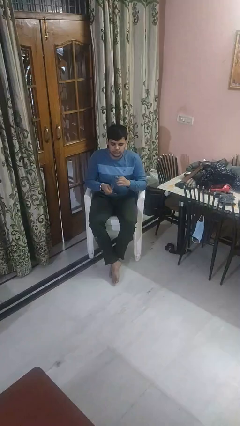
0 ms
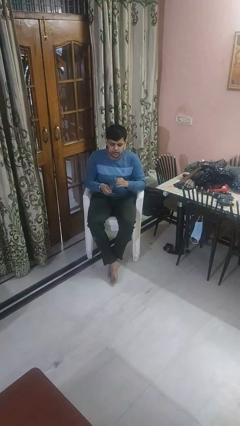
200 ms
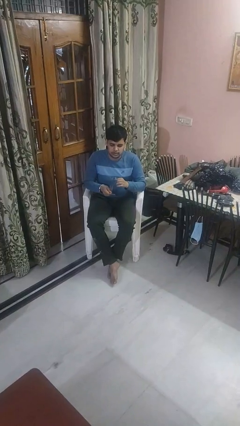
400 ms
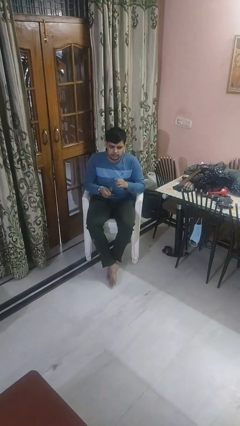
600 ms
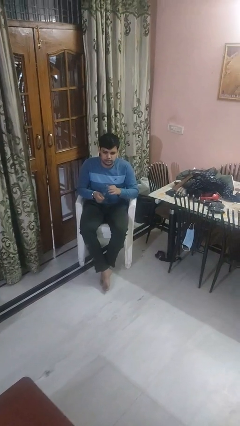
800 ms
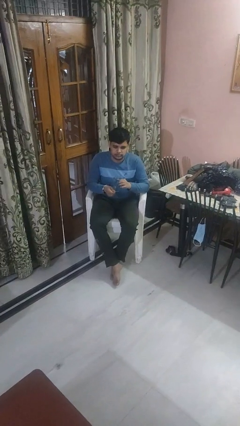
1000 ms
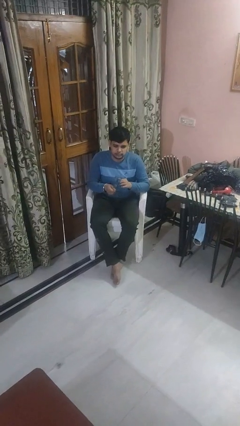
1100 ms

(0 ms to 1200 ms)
person cleans eyeglasses

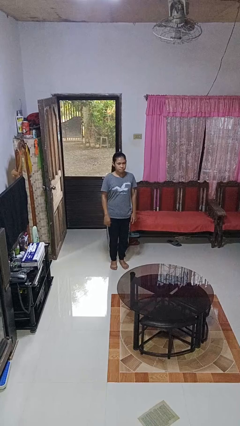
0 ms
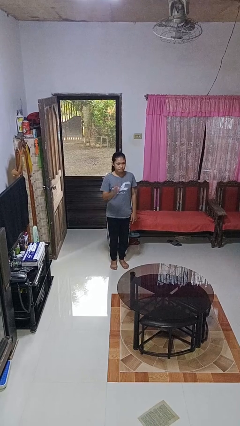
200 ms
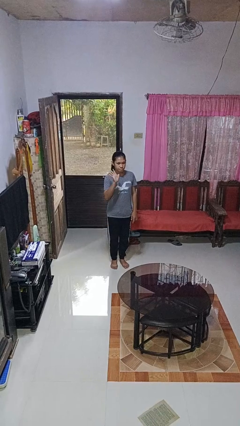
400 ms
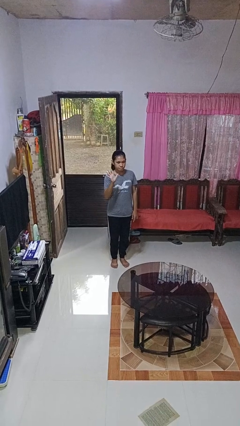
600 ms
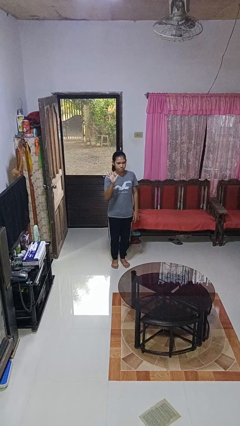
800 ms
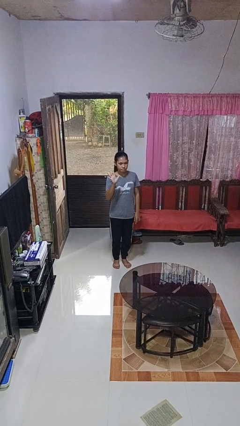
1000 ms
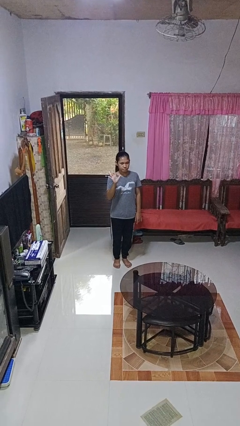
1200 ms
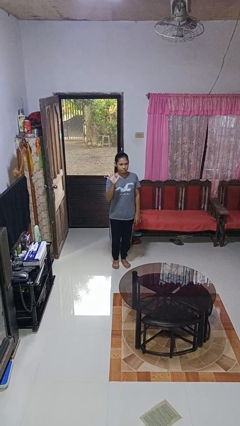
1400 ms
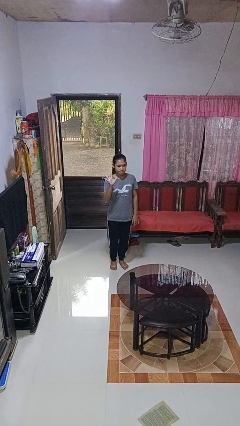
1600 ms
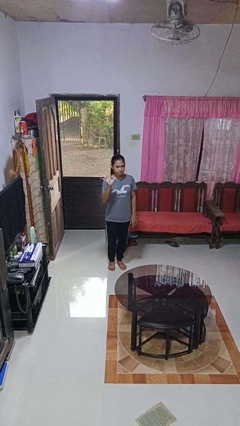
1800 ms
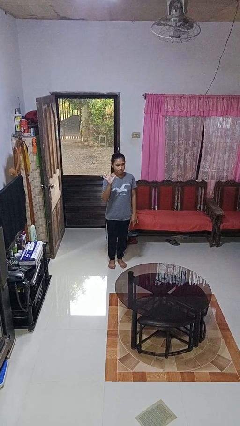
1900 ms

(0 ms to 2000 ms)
person gestures number five

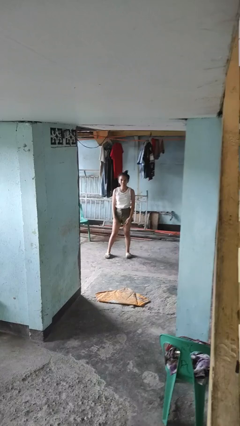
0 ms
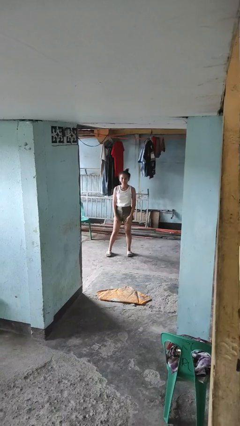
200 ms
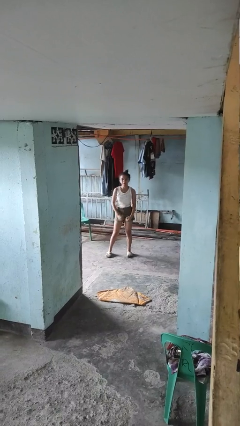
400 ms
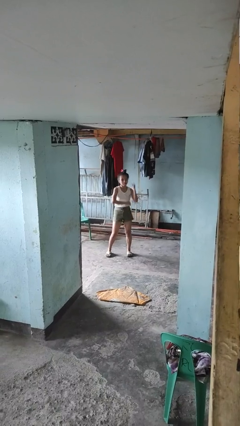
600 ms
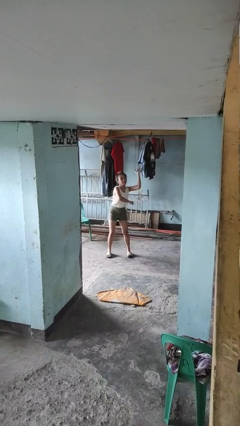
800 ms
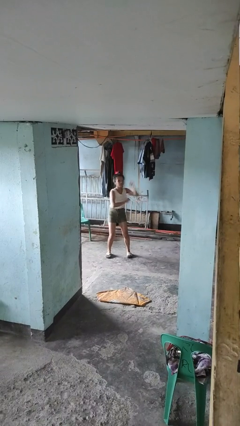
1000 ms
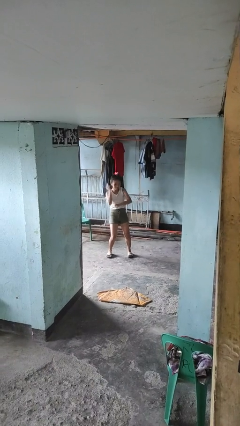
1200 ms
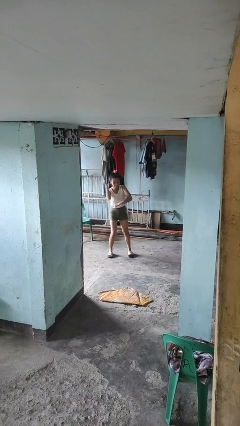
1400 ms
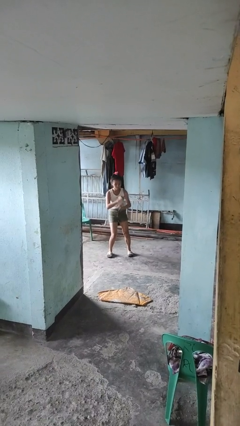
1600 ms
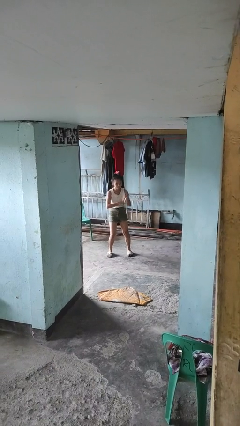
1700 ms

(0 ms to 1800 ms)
person dances in place

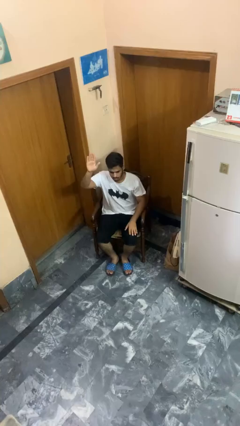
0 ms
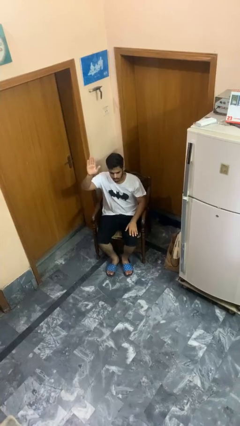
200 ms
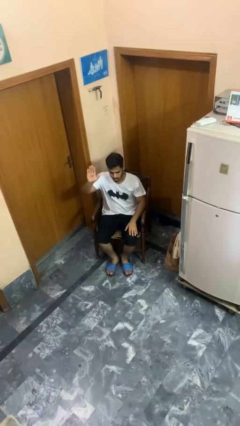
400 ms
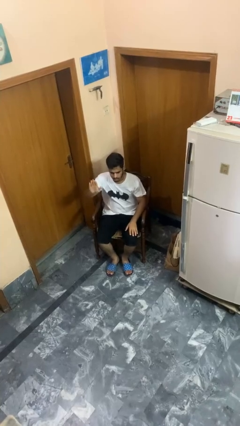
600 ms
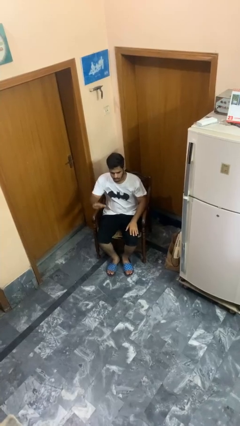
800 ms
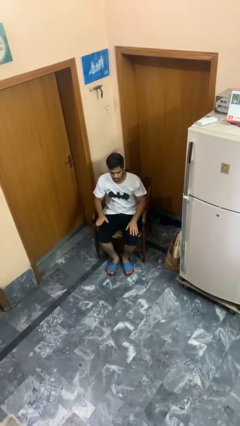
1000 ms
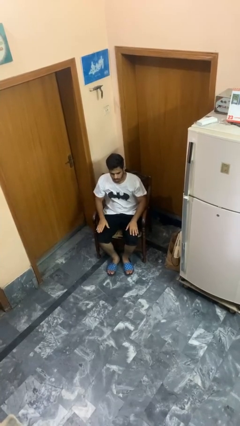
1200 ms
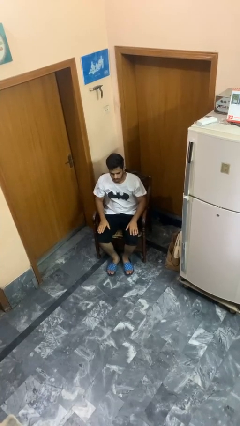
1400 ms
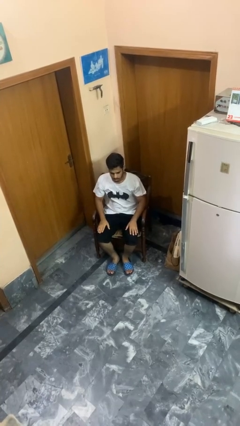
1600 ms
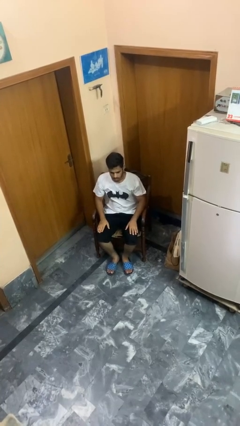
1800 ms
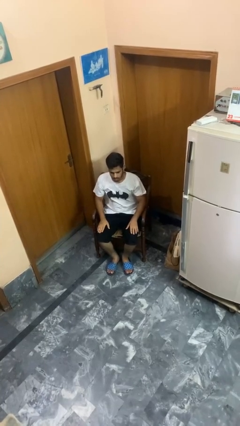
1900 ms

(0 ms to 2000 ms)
person gestures lower hand

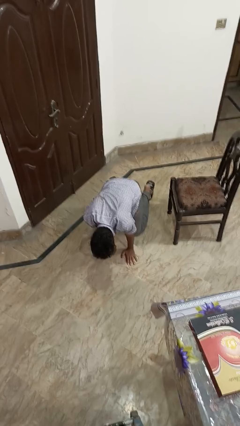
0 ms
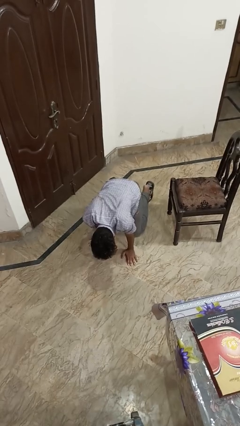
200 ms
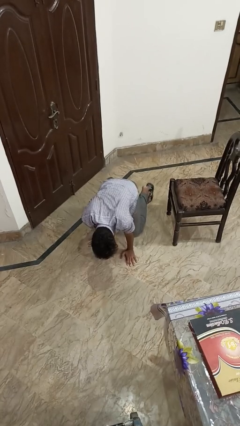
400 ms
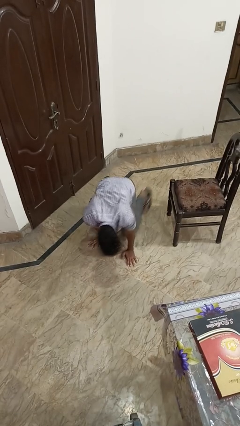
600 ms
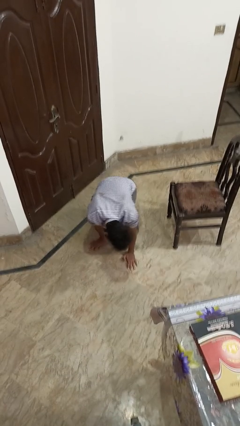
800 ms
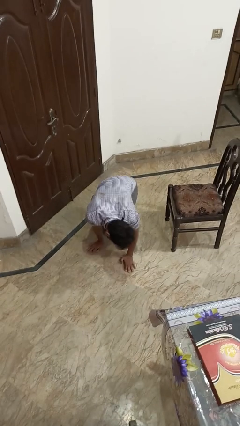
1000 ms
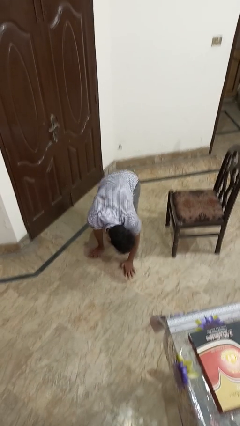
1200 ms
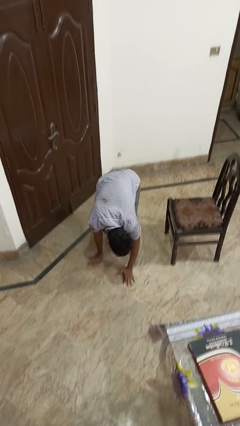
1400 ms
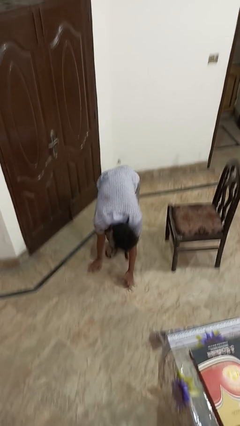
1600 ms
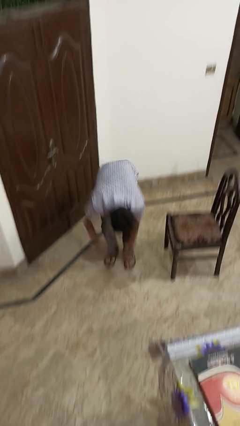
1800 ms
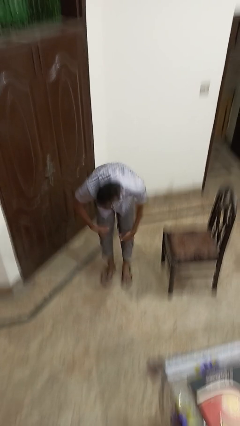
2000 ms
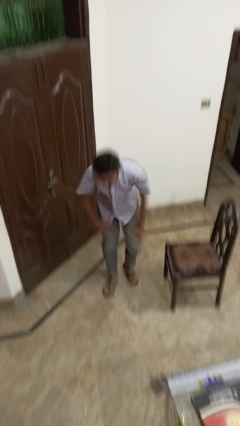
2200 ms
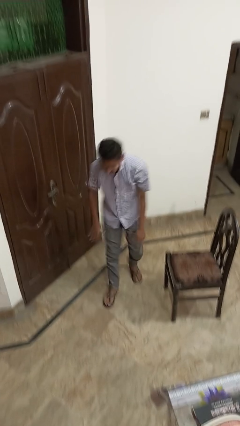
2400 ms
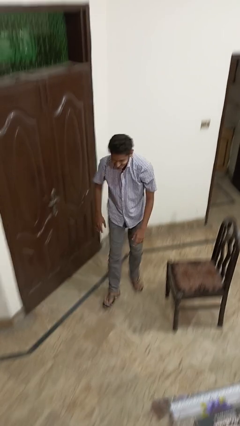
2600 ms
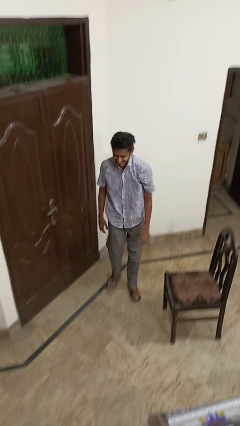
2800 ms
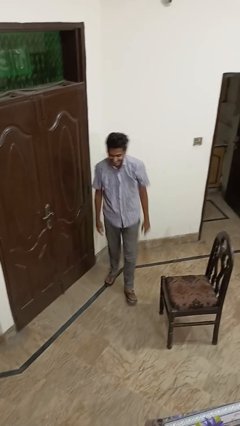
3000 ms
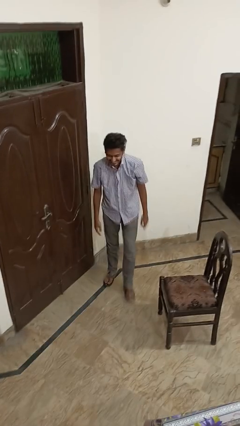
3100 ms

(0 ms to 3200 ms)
person stands up from floor

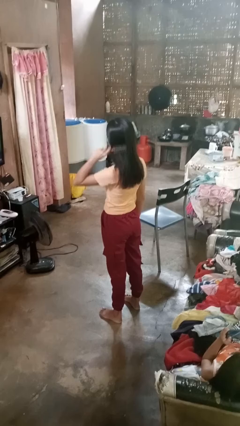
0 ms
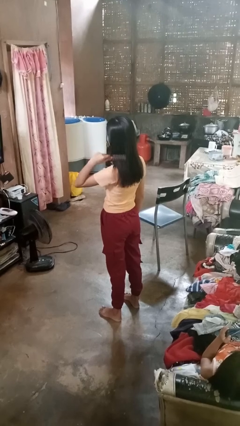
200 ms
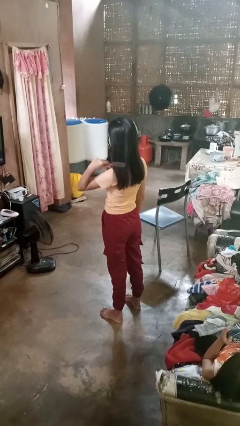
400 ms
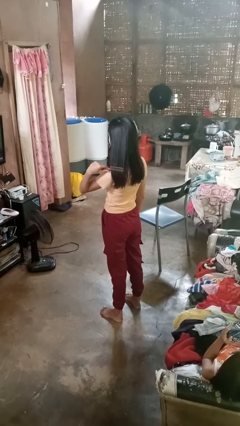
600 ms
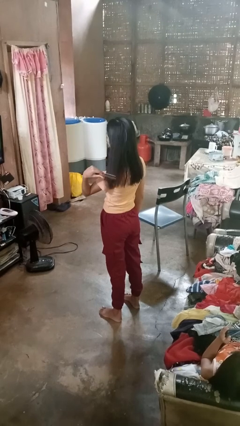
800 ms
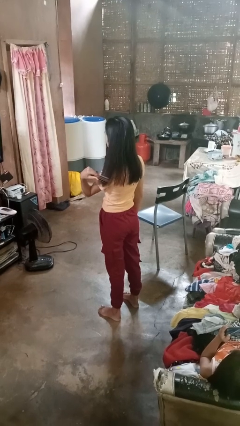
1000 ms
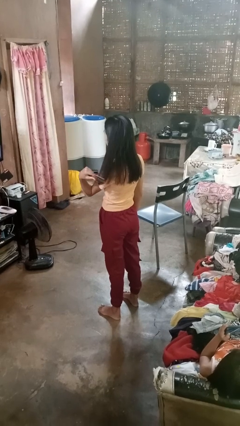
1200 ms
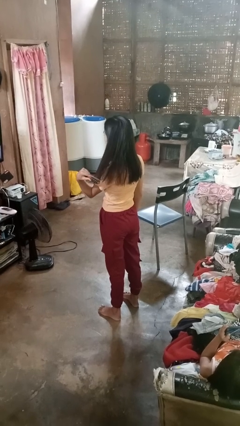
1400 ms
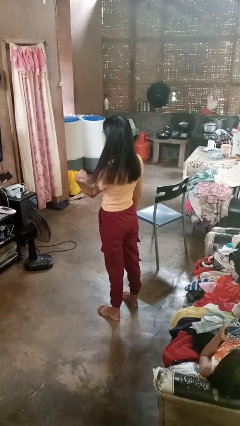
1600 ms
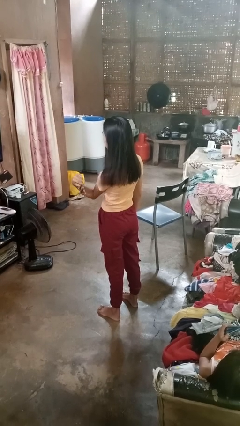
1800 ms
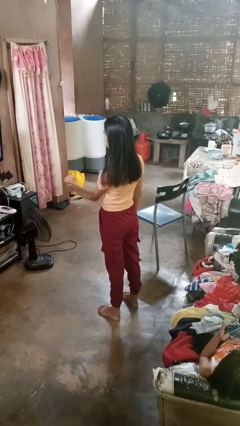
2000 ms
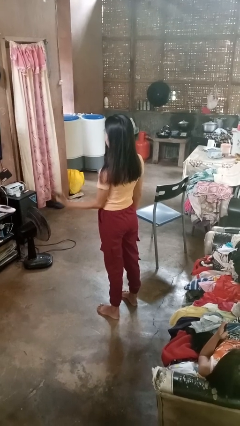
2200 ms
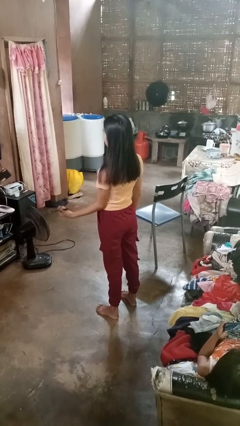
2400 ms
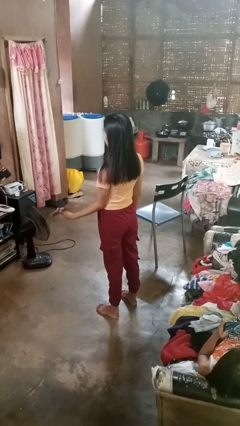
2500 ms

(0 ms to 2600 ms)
person brushes hair

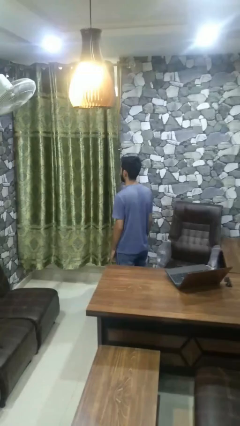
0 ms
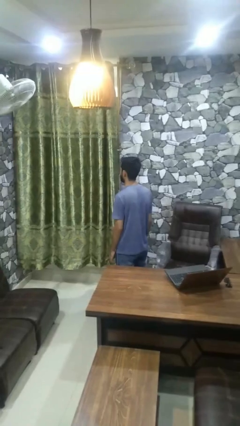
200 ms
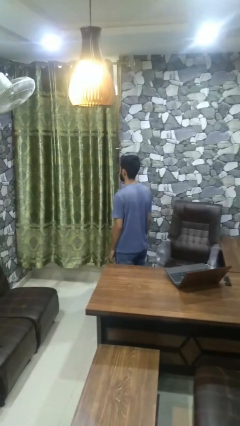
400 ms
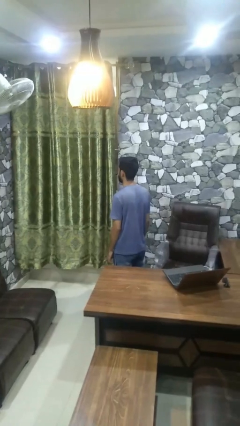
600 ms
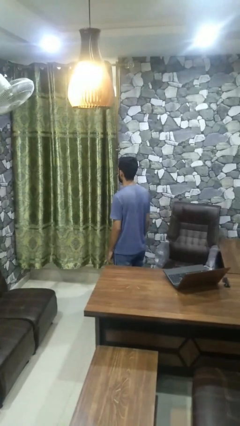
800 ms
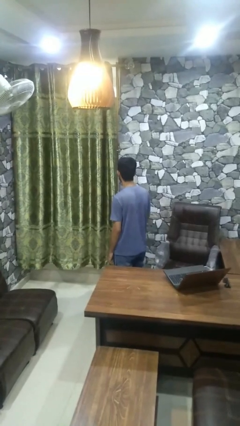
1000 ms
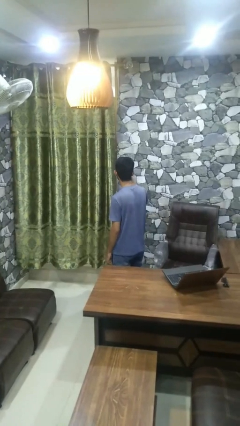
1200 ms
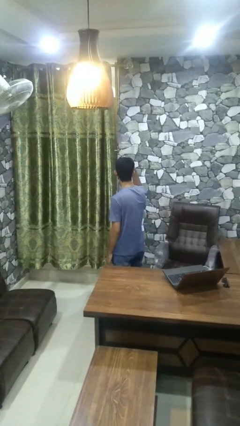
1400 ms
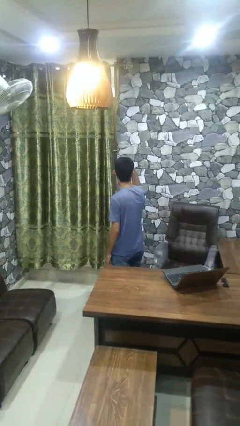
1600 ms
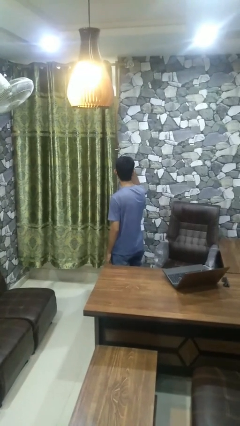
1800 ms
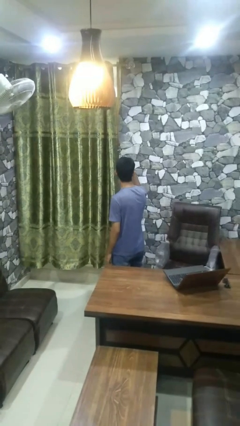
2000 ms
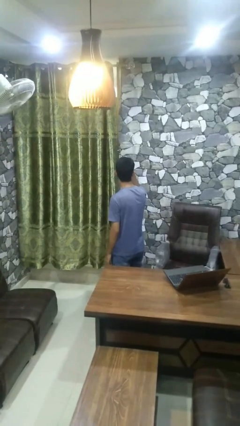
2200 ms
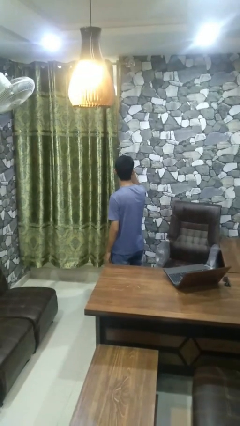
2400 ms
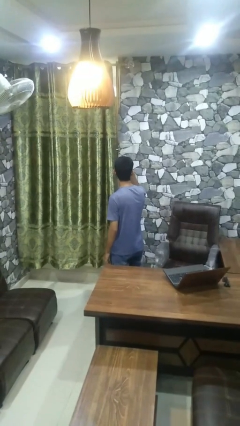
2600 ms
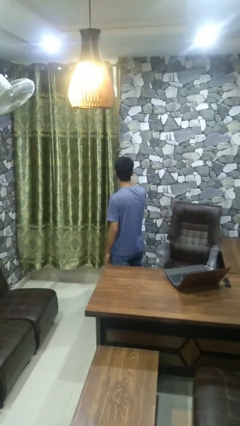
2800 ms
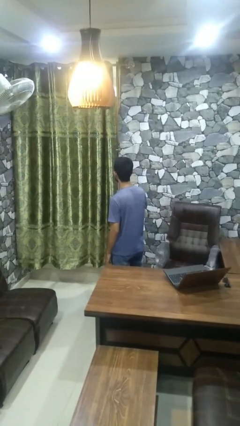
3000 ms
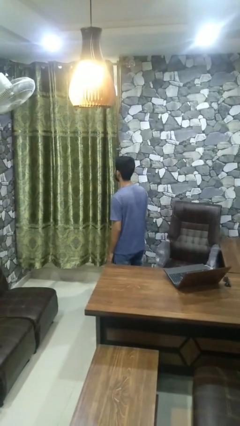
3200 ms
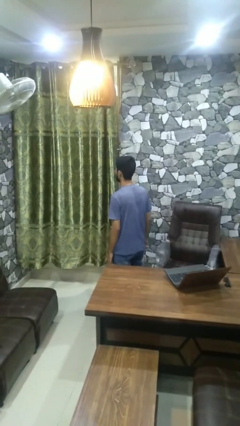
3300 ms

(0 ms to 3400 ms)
person gestures watch closely

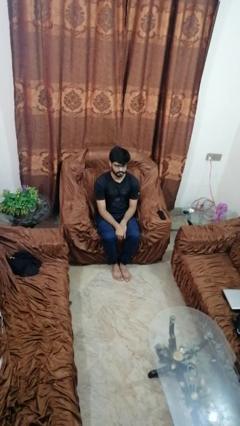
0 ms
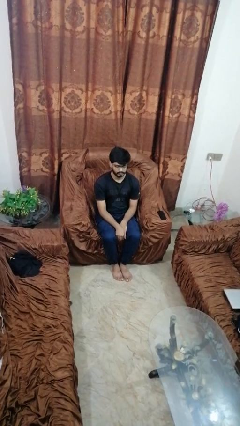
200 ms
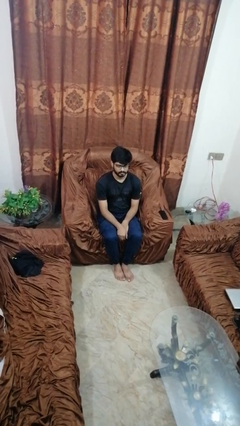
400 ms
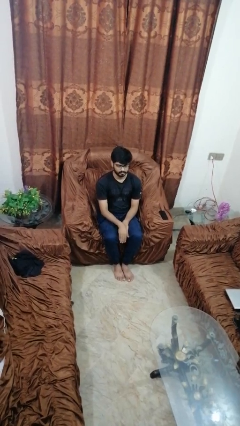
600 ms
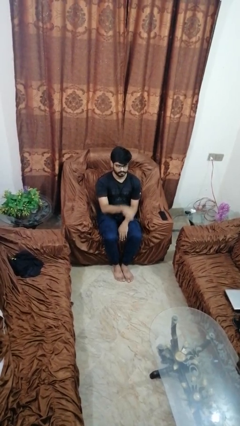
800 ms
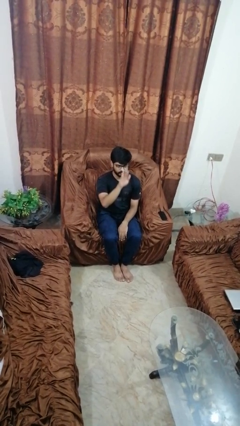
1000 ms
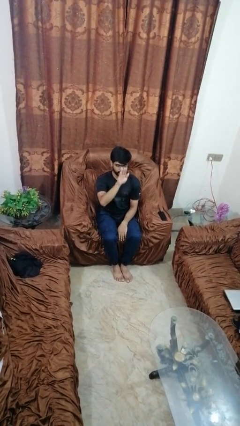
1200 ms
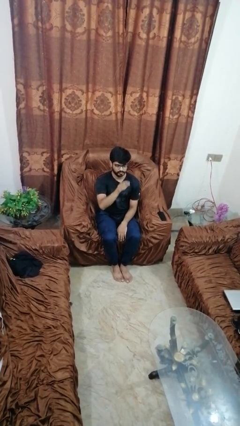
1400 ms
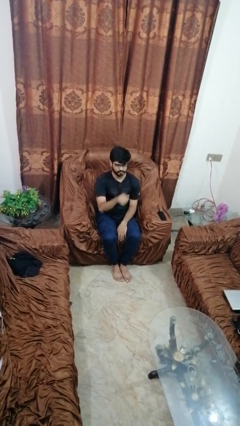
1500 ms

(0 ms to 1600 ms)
person gestures swipe up
